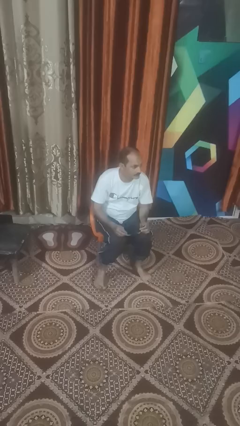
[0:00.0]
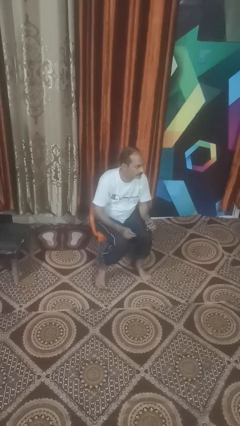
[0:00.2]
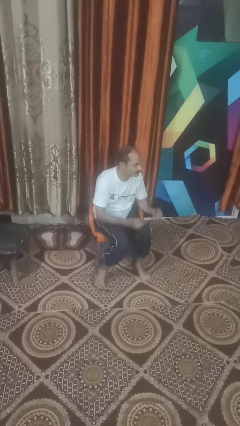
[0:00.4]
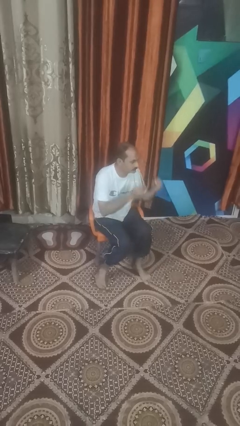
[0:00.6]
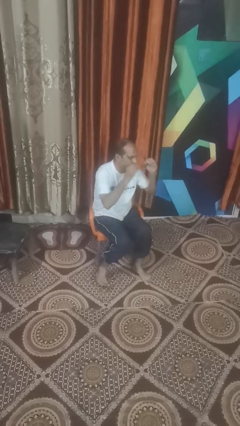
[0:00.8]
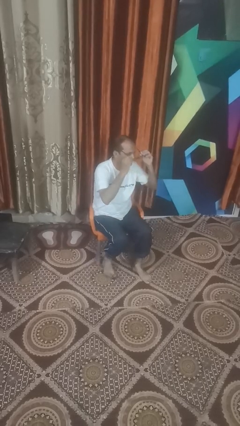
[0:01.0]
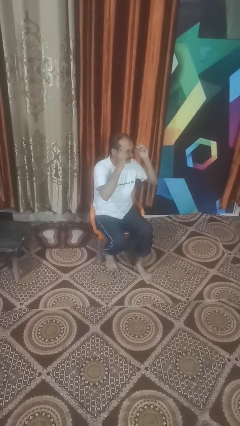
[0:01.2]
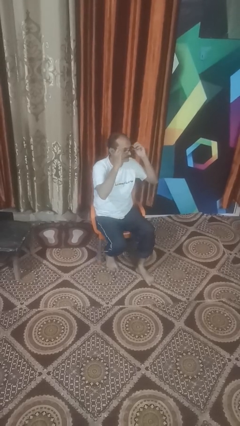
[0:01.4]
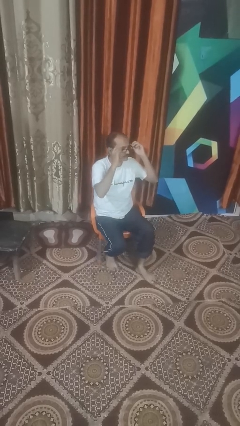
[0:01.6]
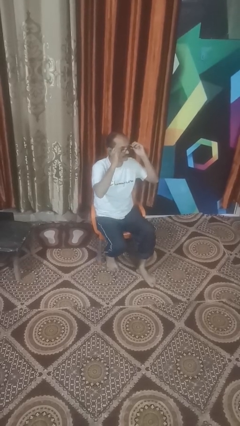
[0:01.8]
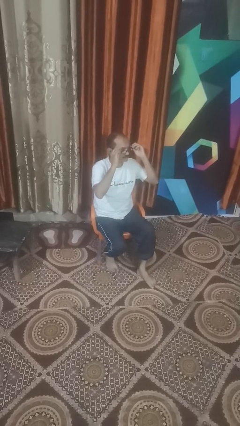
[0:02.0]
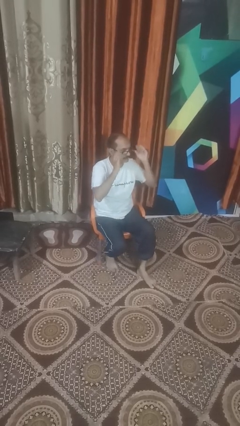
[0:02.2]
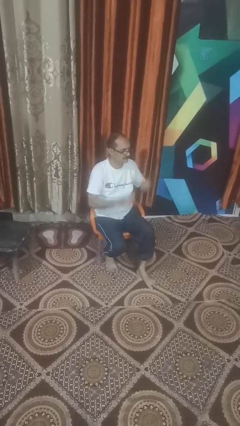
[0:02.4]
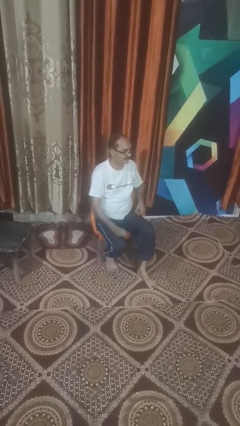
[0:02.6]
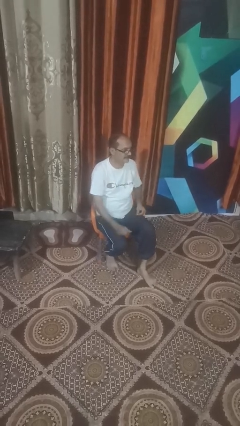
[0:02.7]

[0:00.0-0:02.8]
person puts on glasses

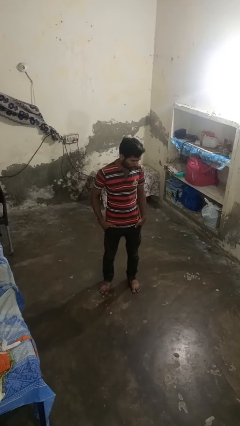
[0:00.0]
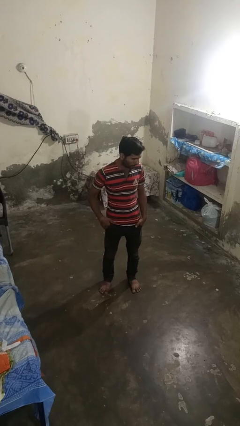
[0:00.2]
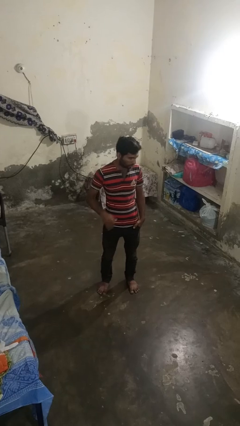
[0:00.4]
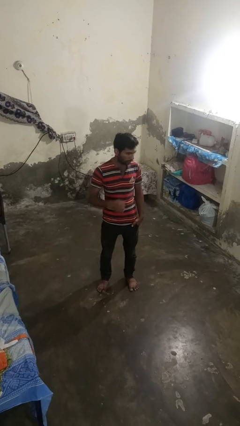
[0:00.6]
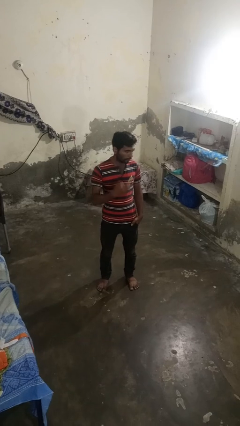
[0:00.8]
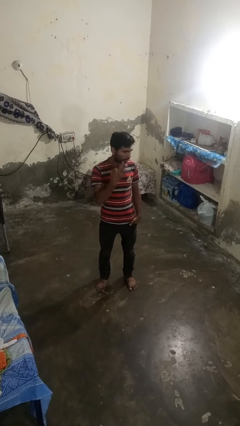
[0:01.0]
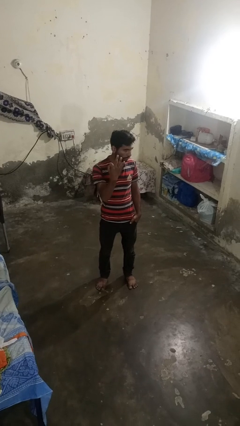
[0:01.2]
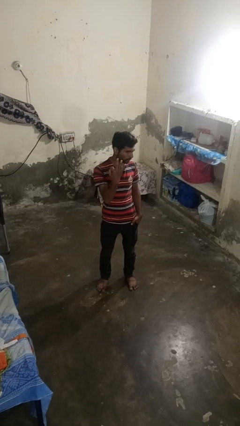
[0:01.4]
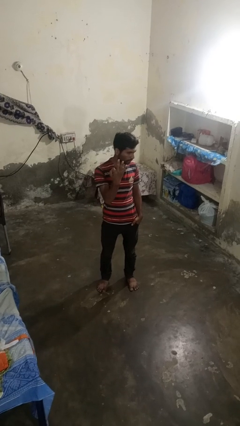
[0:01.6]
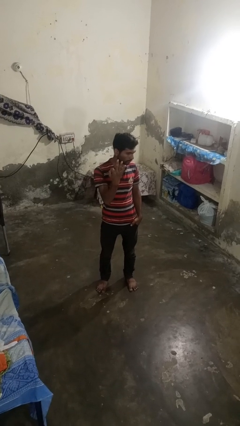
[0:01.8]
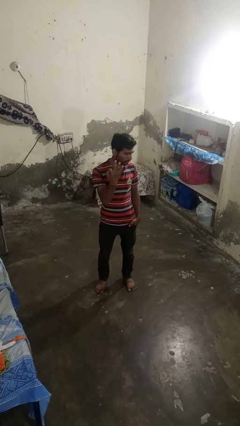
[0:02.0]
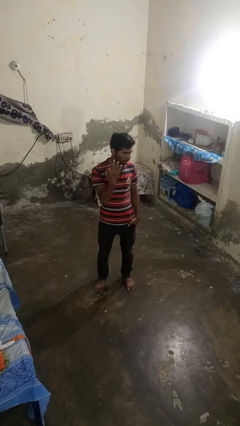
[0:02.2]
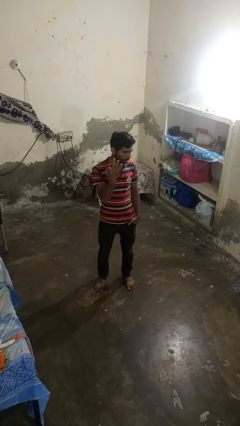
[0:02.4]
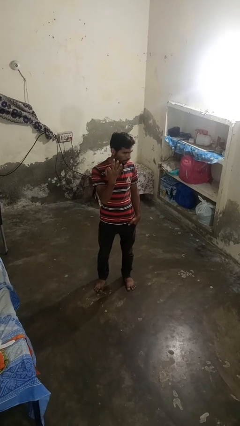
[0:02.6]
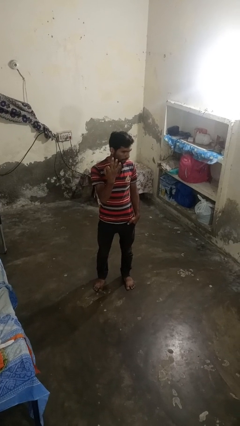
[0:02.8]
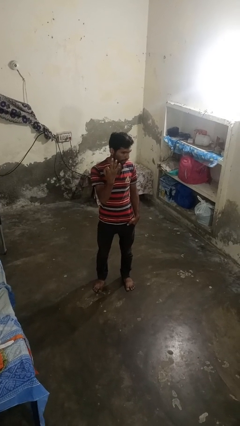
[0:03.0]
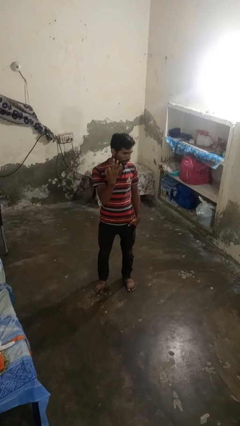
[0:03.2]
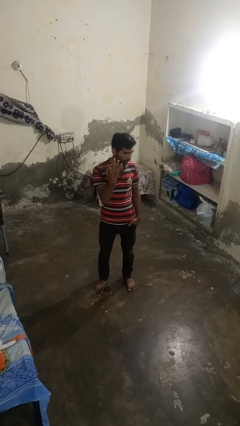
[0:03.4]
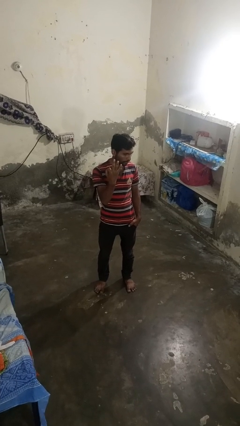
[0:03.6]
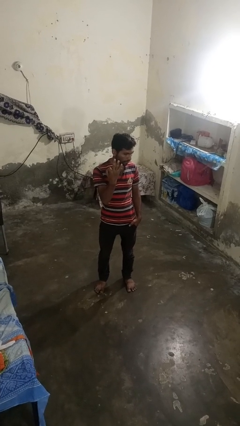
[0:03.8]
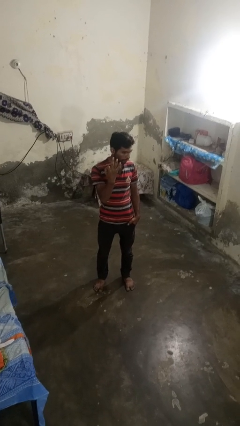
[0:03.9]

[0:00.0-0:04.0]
person gestures number three

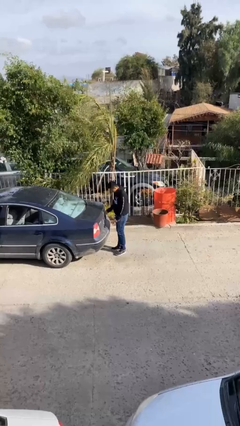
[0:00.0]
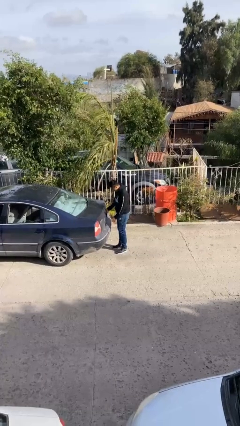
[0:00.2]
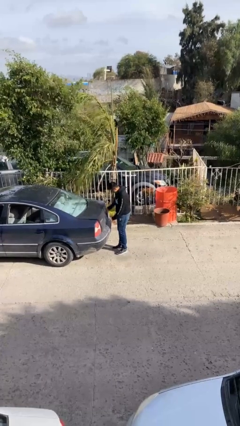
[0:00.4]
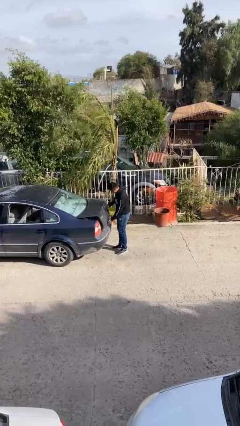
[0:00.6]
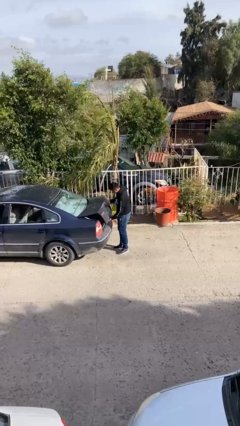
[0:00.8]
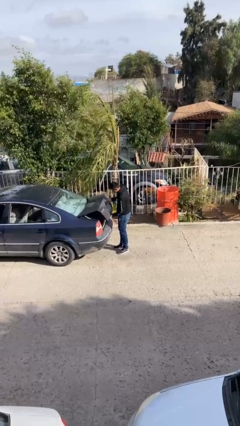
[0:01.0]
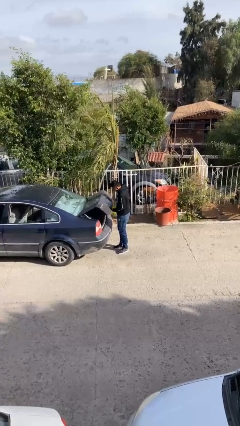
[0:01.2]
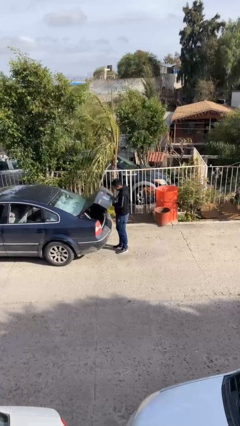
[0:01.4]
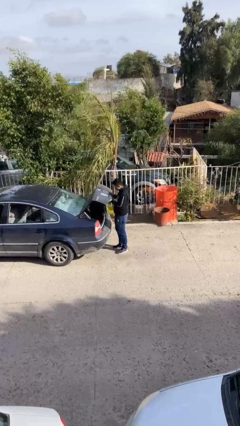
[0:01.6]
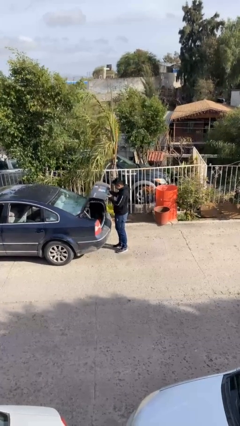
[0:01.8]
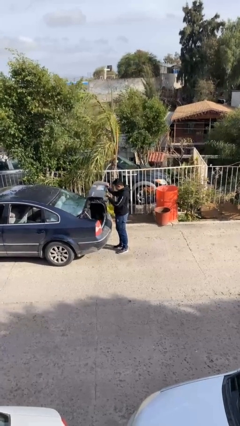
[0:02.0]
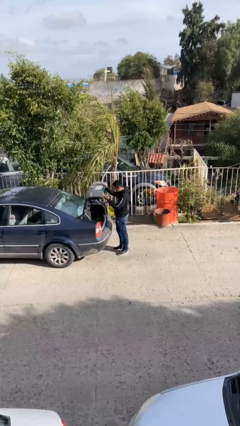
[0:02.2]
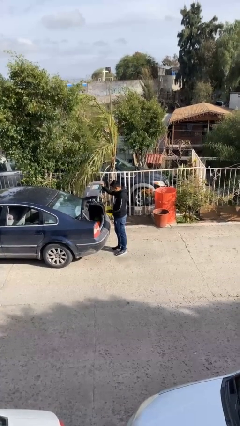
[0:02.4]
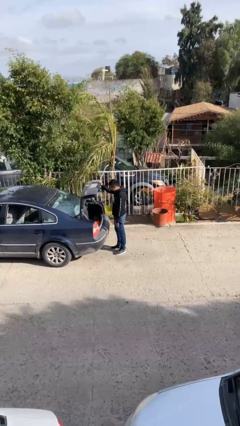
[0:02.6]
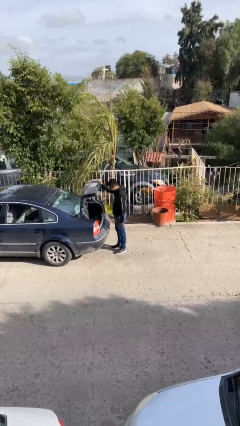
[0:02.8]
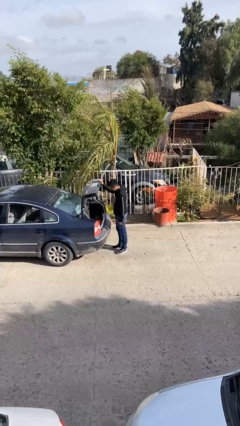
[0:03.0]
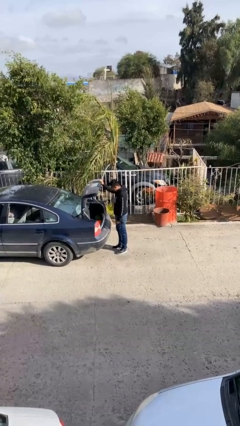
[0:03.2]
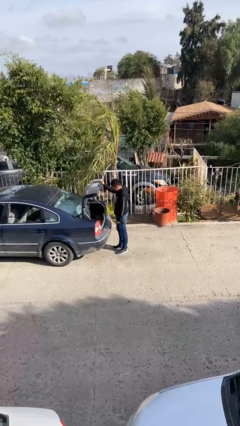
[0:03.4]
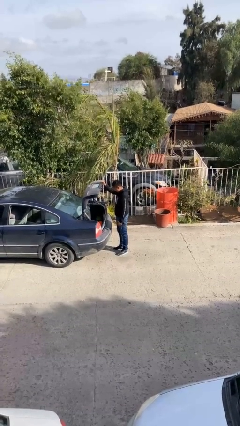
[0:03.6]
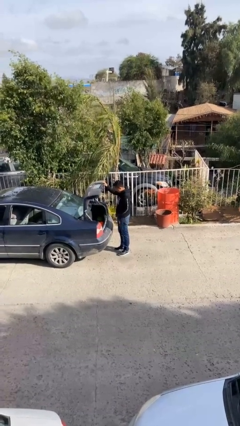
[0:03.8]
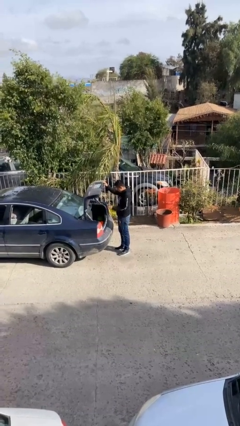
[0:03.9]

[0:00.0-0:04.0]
person opens car trunk

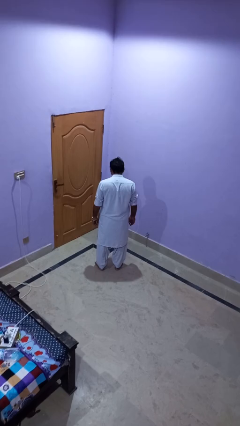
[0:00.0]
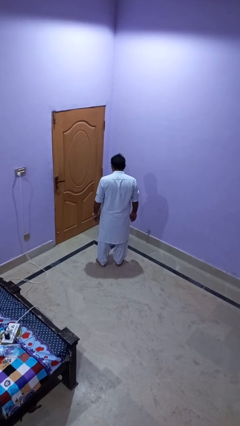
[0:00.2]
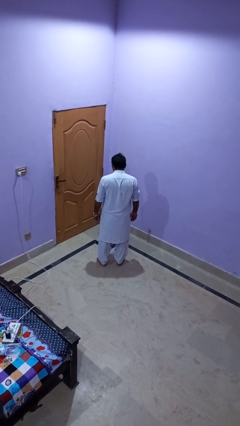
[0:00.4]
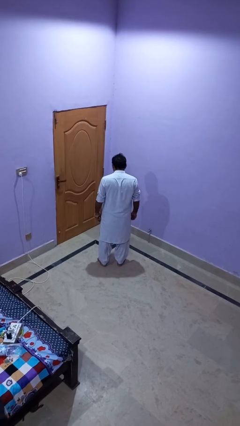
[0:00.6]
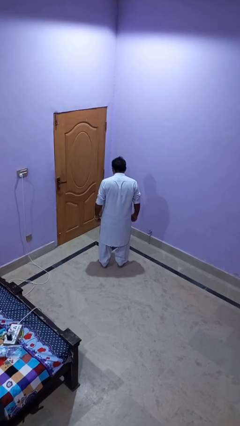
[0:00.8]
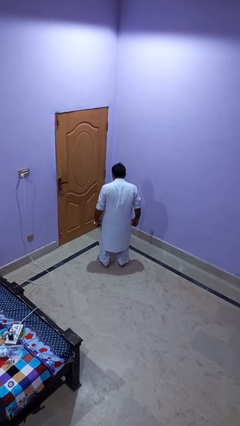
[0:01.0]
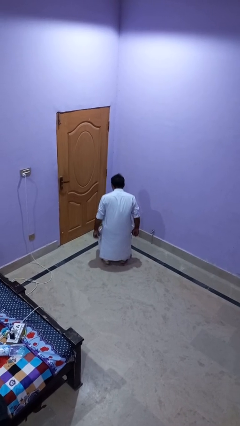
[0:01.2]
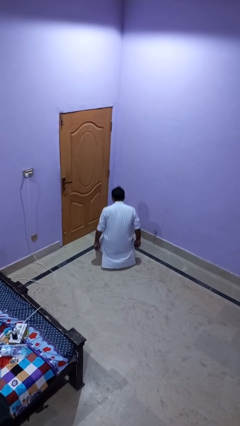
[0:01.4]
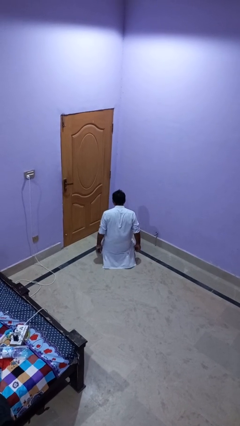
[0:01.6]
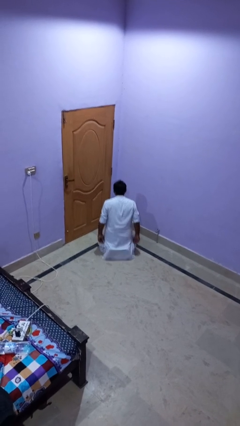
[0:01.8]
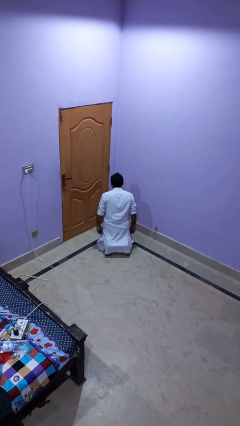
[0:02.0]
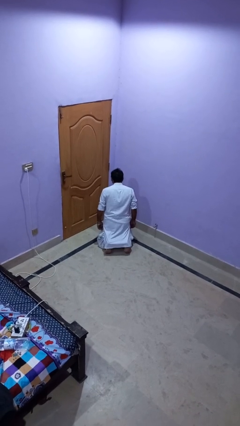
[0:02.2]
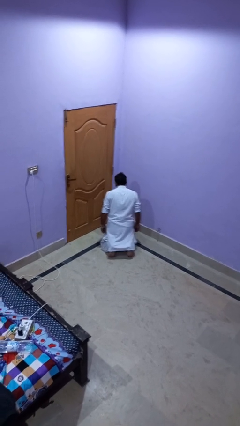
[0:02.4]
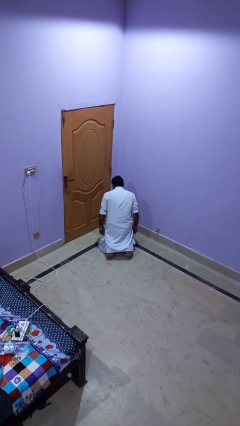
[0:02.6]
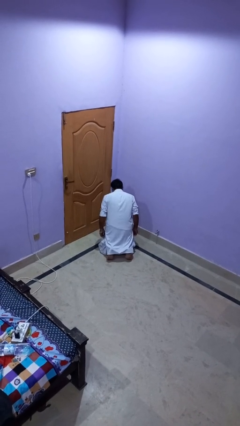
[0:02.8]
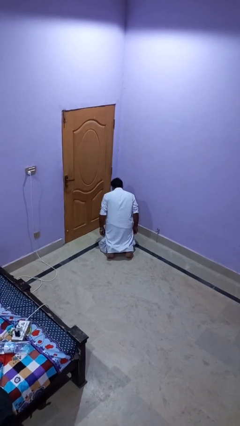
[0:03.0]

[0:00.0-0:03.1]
person kneels

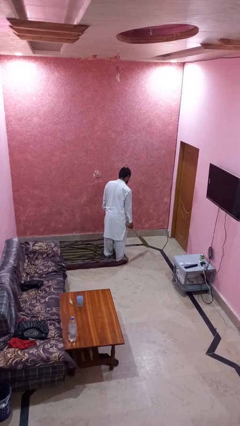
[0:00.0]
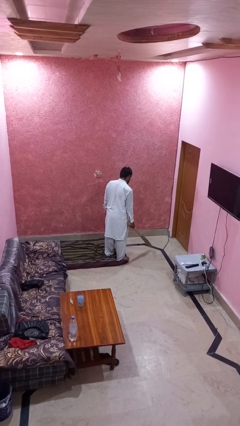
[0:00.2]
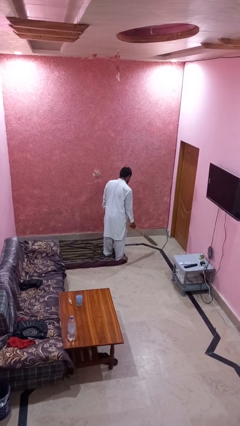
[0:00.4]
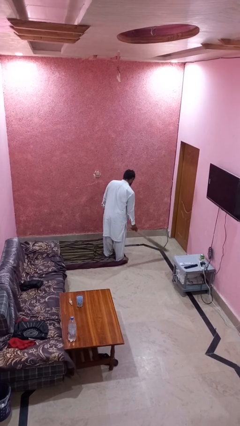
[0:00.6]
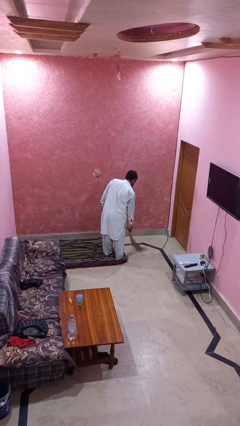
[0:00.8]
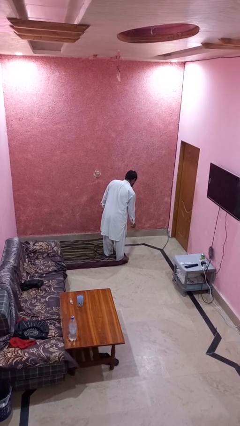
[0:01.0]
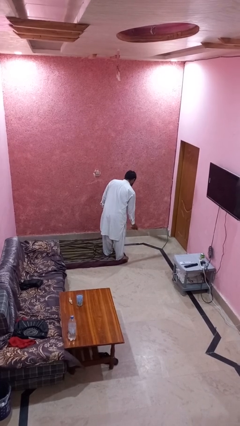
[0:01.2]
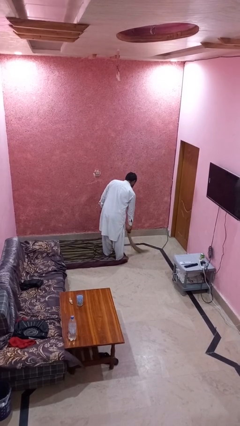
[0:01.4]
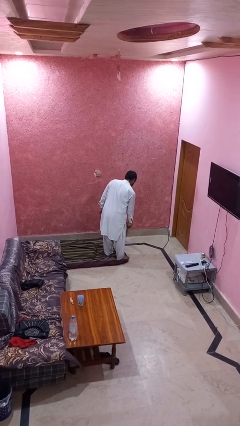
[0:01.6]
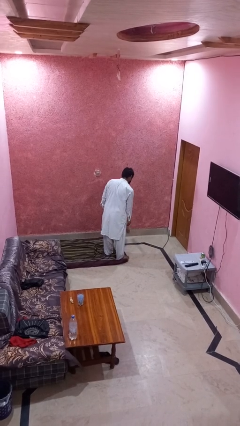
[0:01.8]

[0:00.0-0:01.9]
person sweeps floor

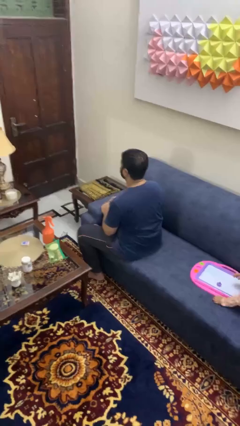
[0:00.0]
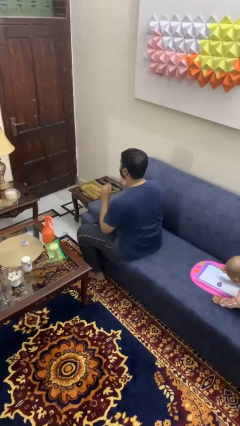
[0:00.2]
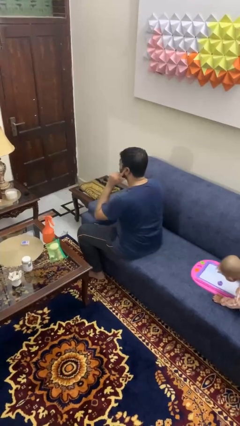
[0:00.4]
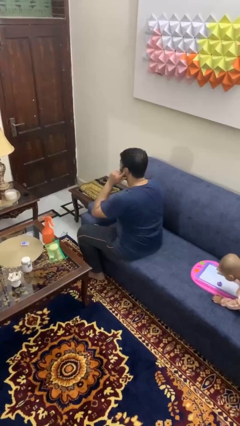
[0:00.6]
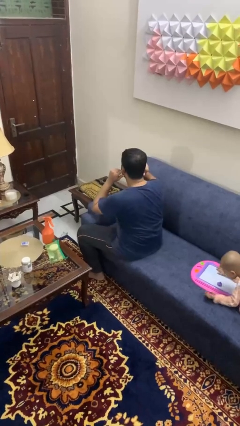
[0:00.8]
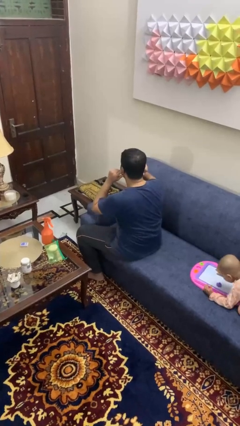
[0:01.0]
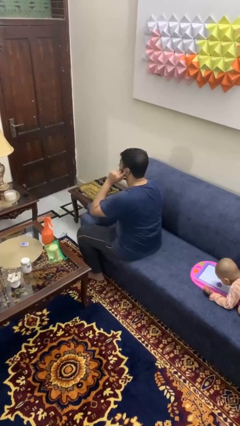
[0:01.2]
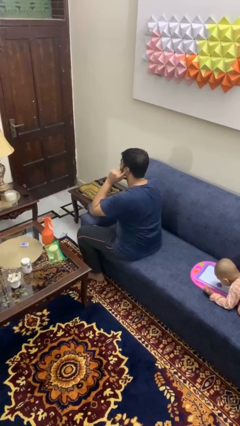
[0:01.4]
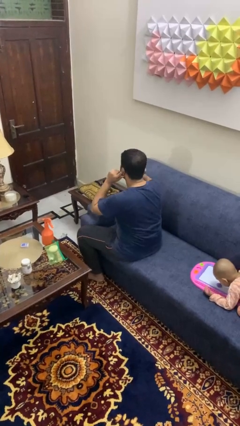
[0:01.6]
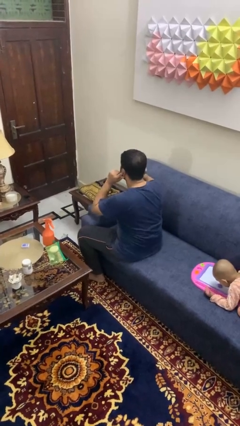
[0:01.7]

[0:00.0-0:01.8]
person puts fingers in ear

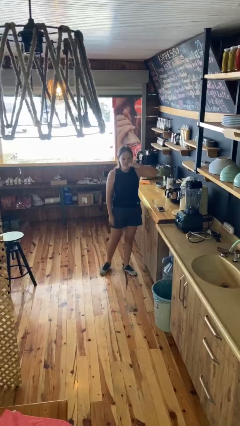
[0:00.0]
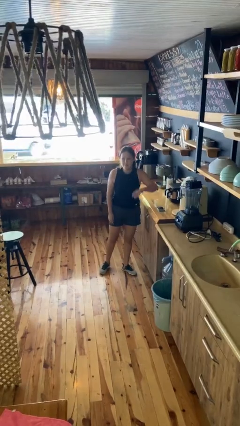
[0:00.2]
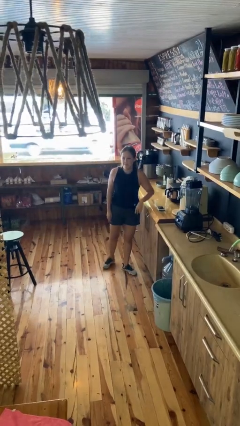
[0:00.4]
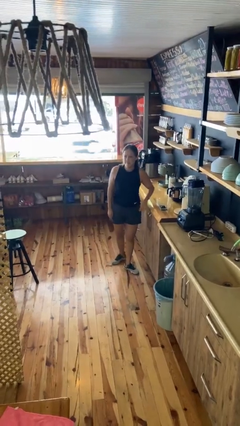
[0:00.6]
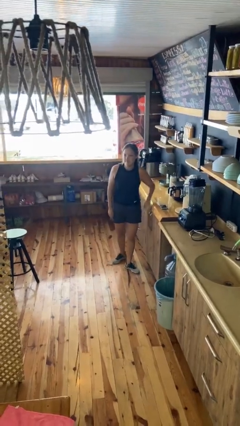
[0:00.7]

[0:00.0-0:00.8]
person salutes
